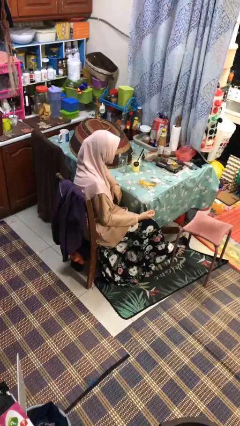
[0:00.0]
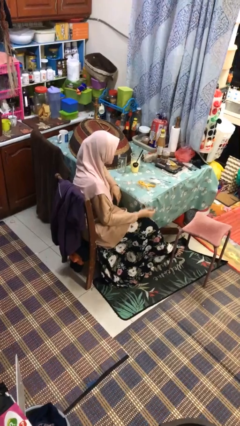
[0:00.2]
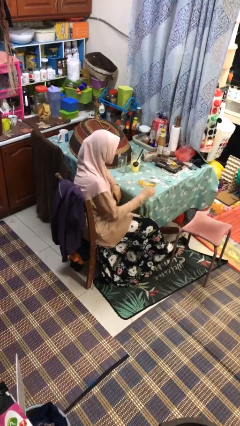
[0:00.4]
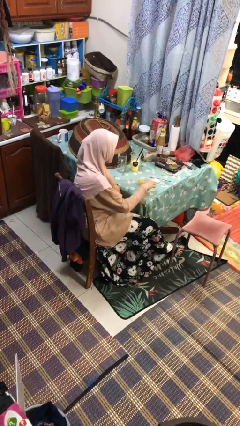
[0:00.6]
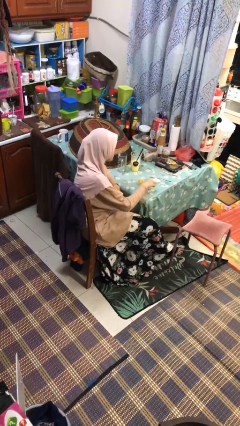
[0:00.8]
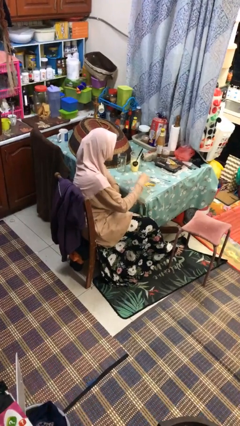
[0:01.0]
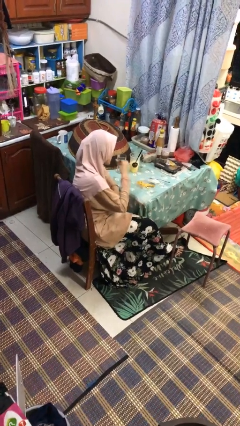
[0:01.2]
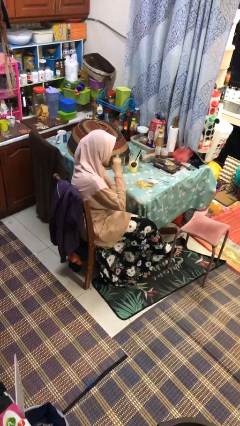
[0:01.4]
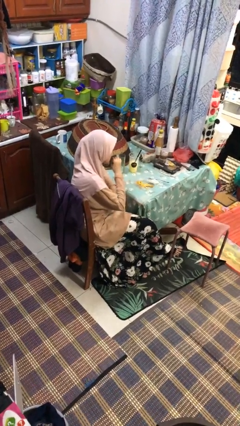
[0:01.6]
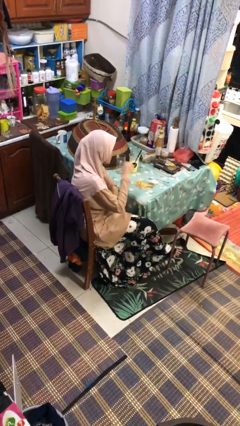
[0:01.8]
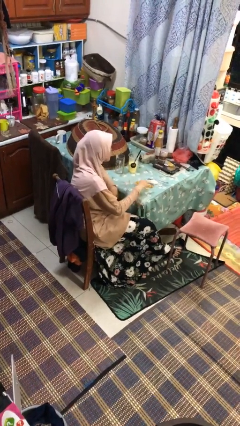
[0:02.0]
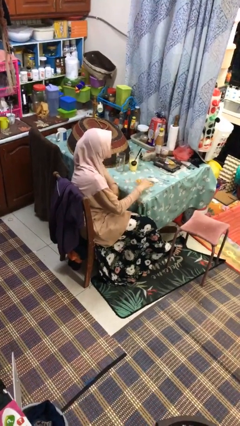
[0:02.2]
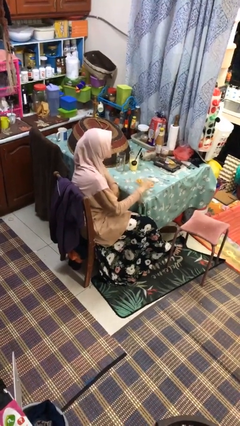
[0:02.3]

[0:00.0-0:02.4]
person eats with hands

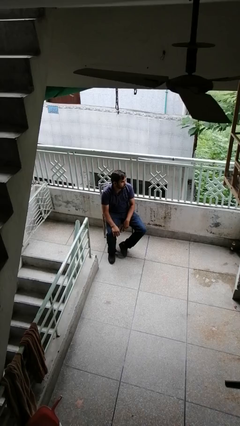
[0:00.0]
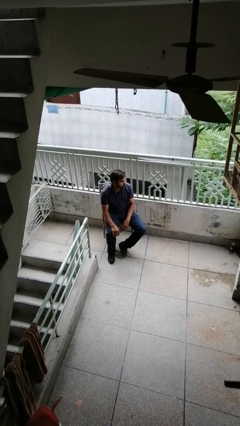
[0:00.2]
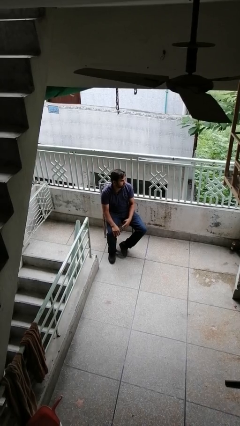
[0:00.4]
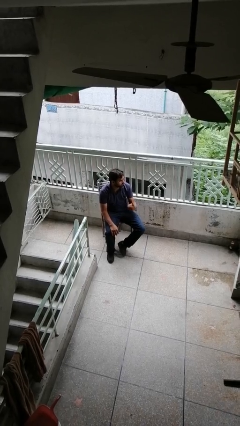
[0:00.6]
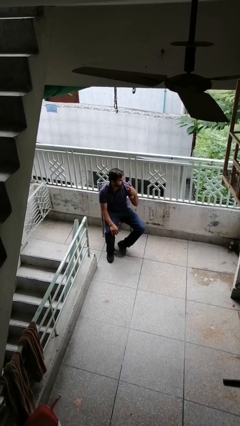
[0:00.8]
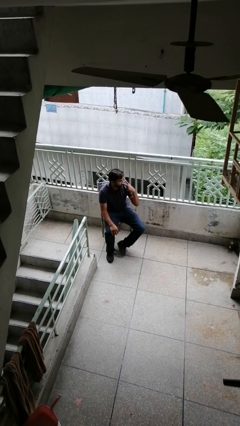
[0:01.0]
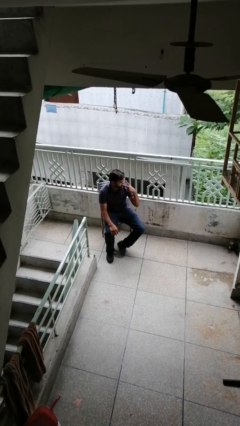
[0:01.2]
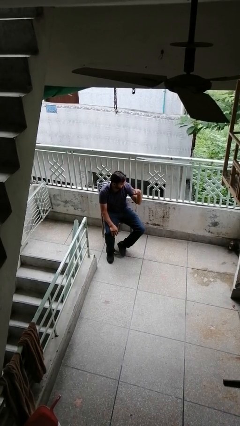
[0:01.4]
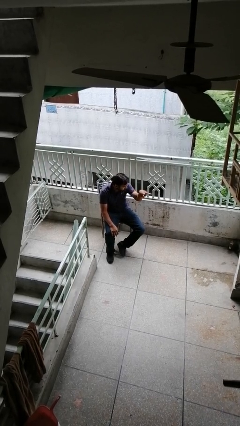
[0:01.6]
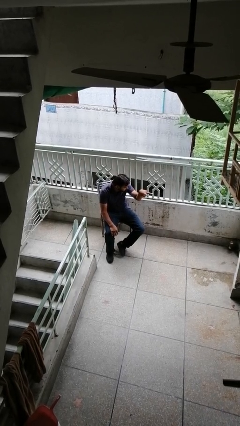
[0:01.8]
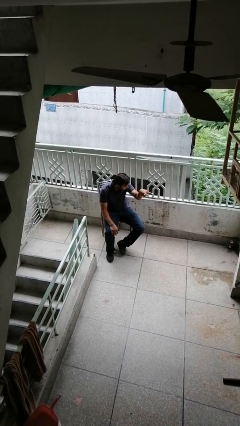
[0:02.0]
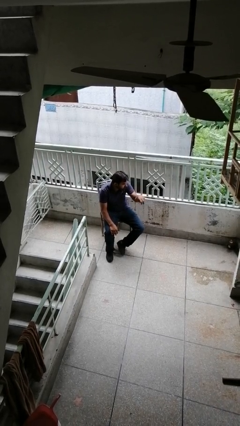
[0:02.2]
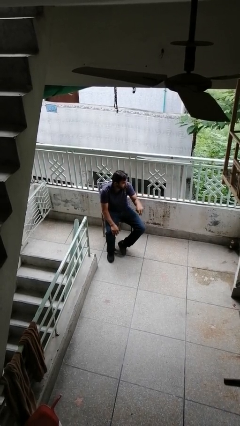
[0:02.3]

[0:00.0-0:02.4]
person gestures watch closely

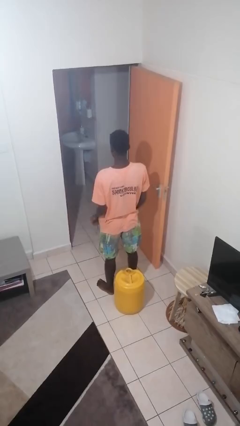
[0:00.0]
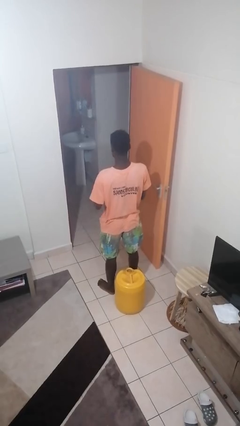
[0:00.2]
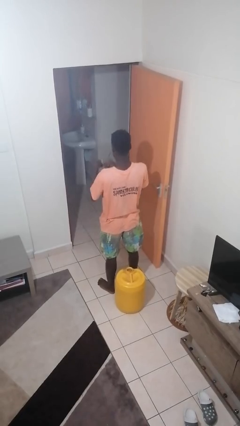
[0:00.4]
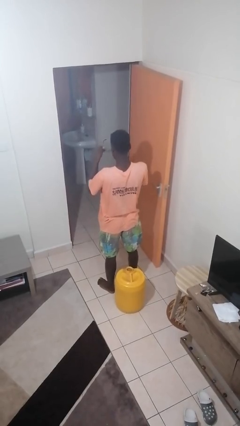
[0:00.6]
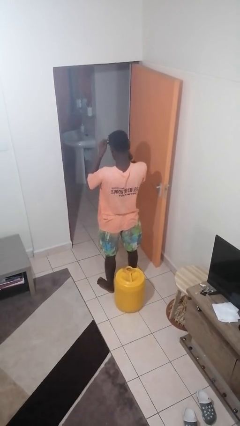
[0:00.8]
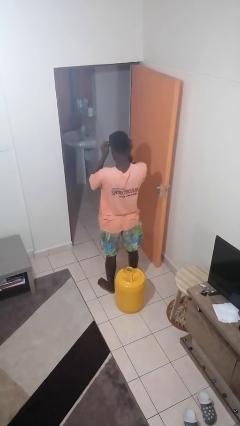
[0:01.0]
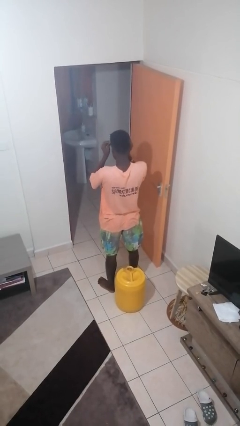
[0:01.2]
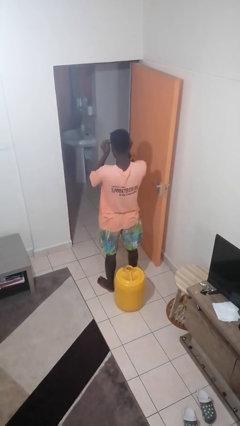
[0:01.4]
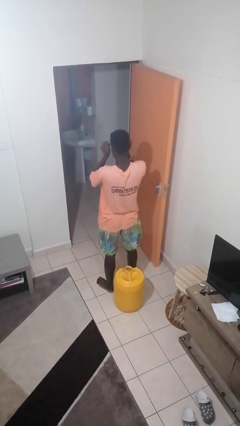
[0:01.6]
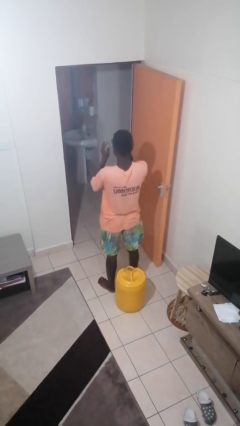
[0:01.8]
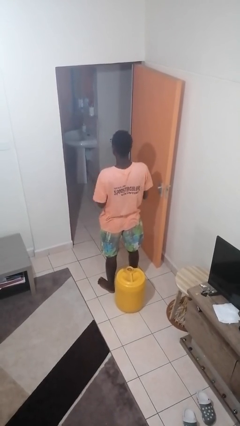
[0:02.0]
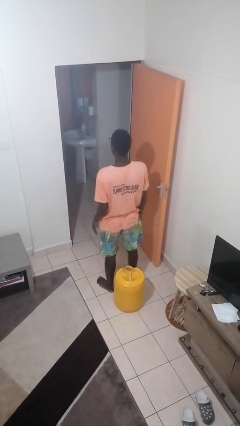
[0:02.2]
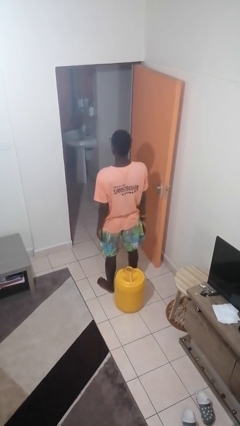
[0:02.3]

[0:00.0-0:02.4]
person puts on glasses

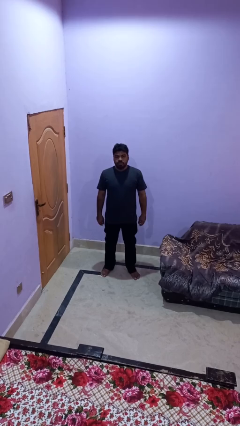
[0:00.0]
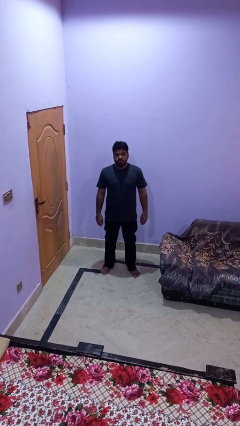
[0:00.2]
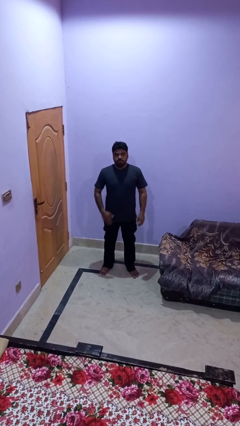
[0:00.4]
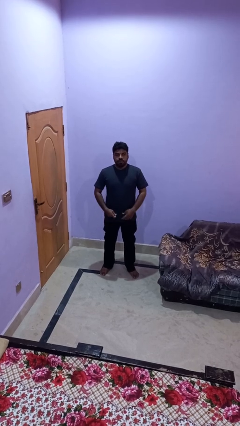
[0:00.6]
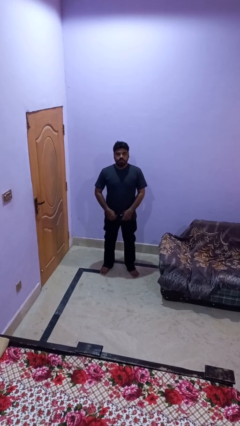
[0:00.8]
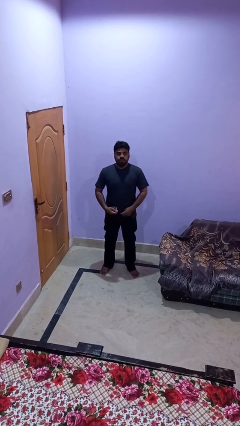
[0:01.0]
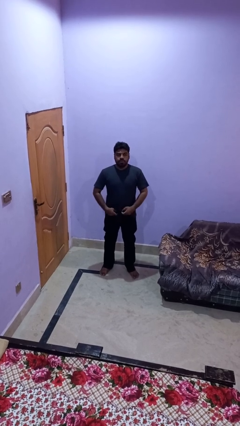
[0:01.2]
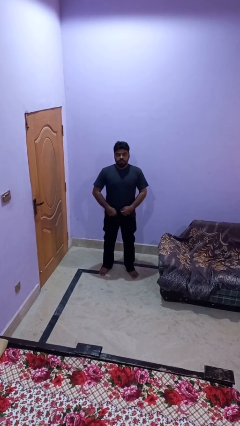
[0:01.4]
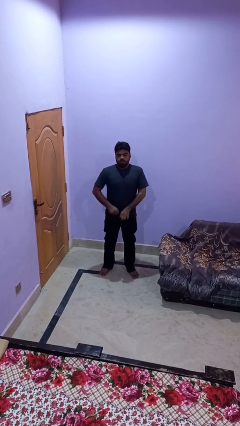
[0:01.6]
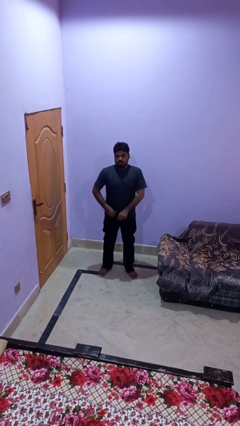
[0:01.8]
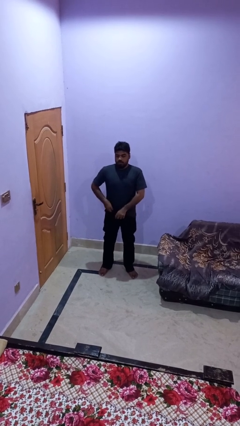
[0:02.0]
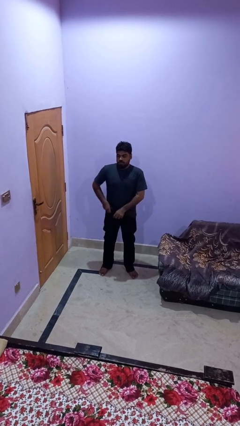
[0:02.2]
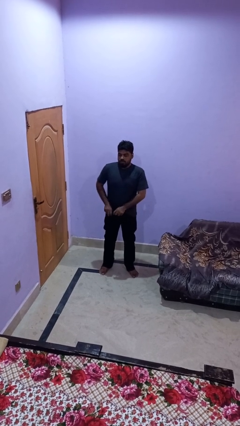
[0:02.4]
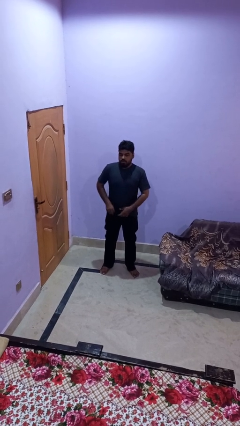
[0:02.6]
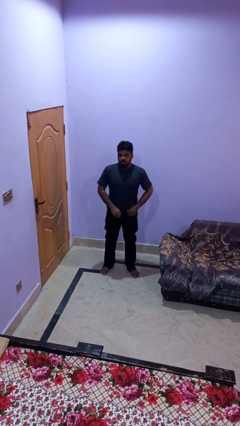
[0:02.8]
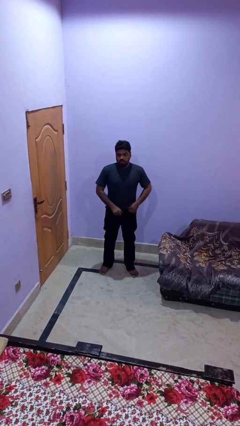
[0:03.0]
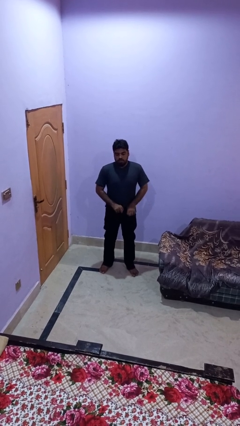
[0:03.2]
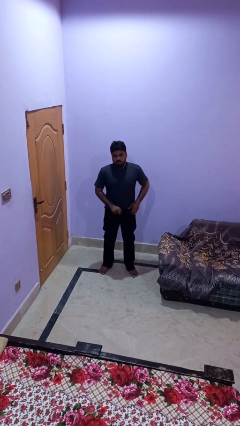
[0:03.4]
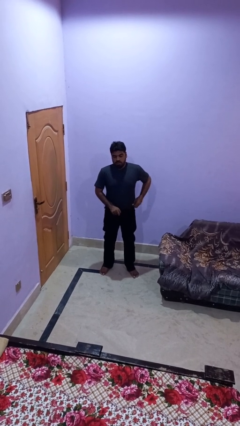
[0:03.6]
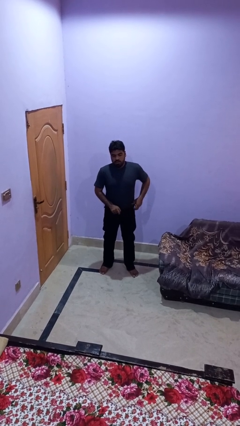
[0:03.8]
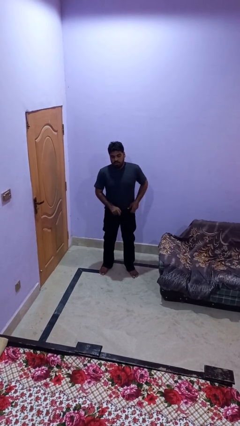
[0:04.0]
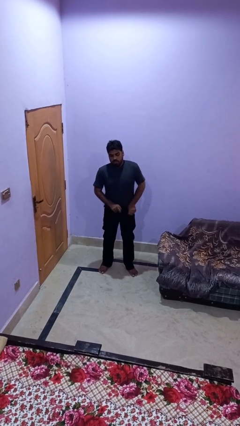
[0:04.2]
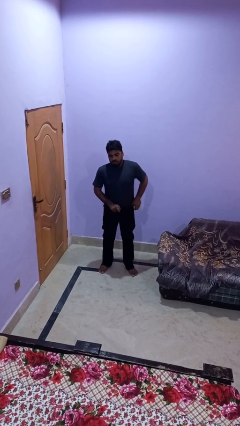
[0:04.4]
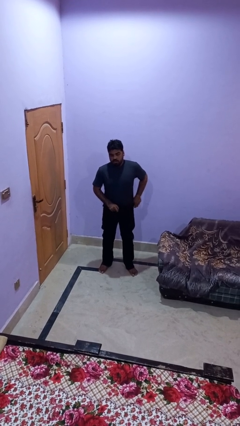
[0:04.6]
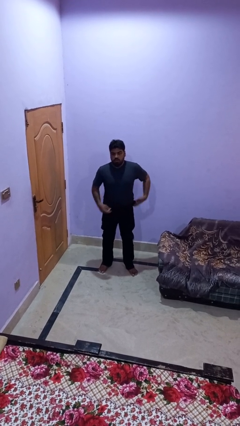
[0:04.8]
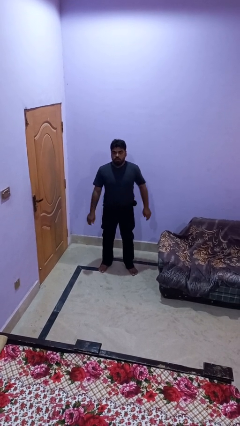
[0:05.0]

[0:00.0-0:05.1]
person tucks in shirt

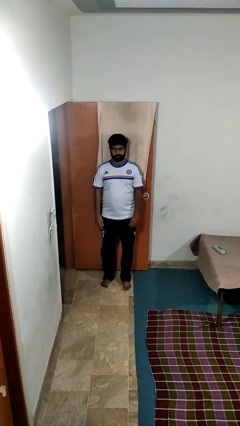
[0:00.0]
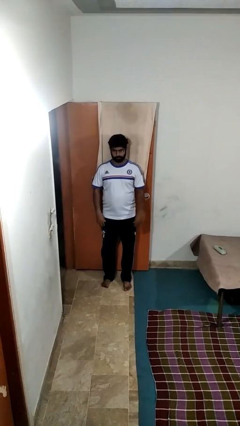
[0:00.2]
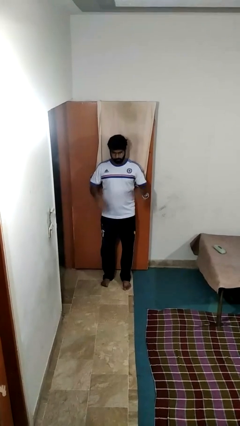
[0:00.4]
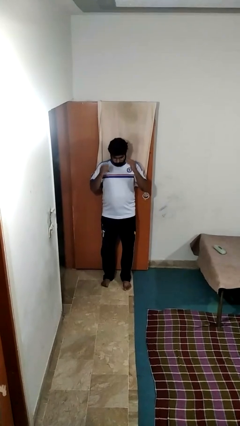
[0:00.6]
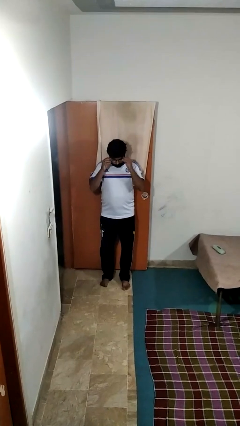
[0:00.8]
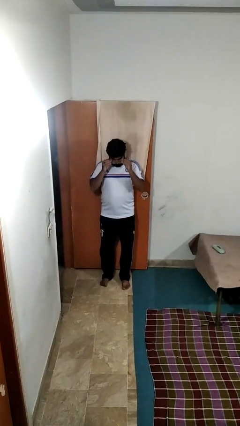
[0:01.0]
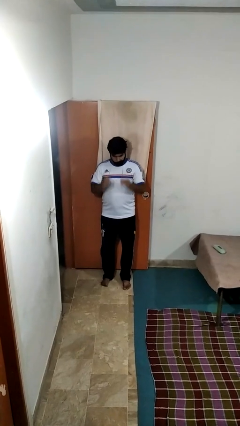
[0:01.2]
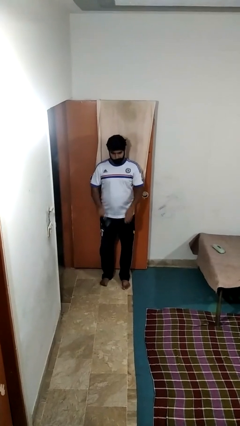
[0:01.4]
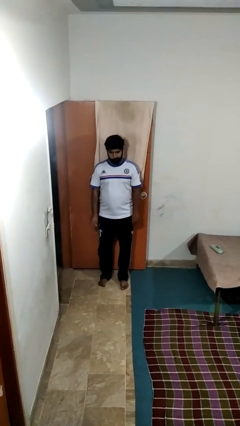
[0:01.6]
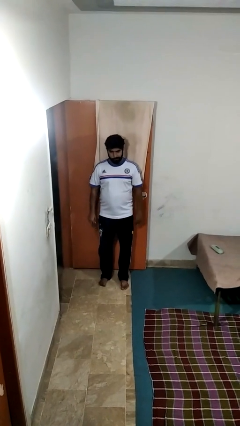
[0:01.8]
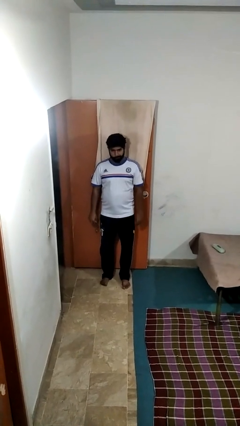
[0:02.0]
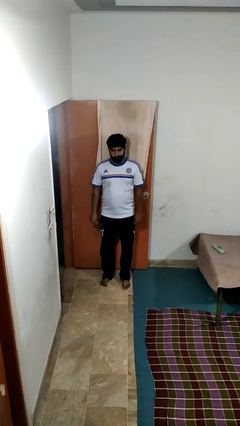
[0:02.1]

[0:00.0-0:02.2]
person takes off glasses

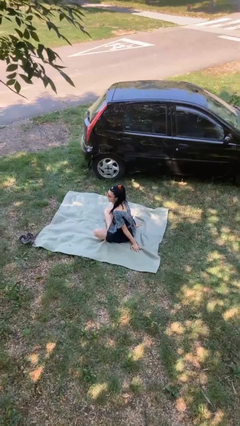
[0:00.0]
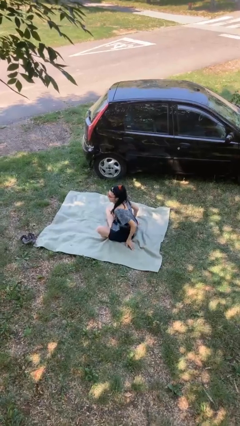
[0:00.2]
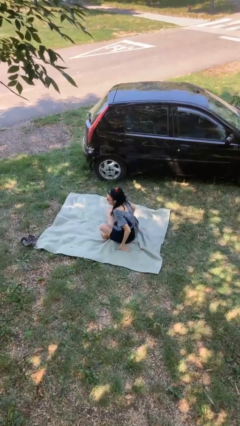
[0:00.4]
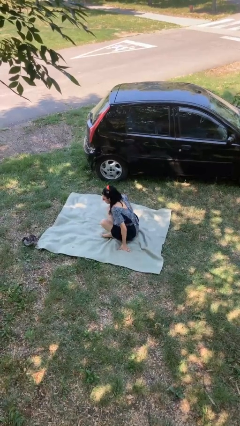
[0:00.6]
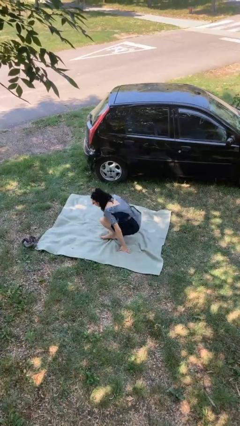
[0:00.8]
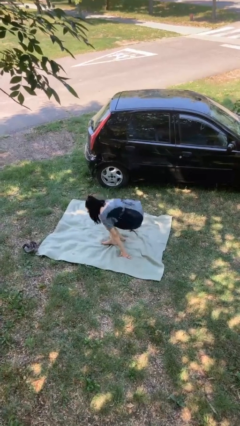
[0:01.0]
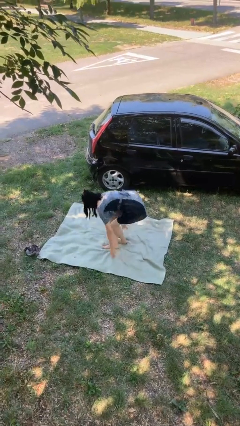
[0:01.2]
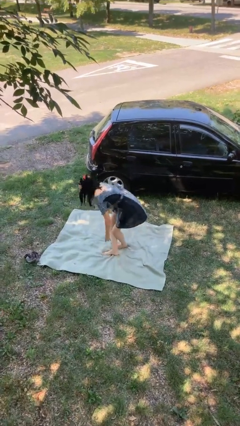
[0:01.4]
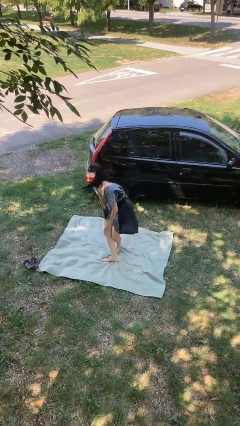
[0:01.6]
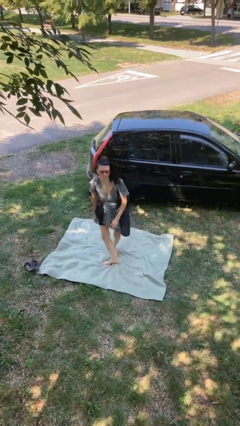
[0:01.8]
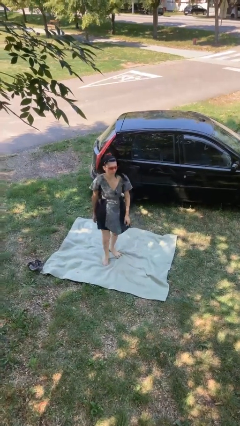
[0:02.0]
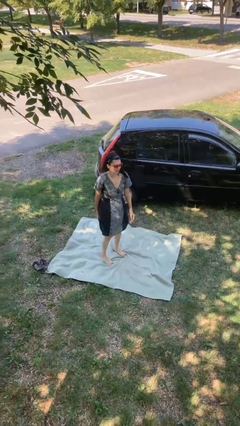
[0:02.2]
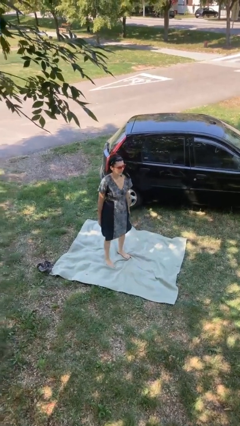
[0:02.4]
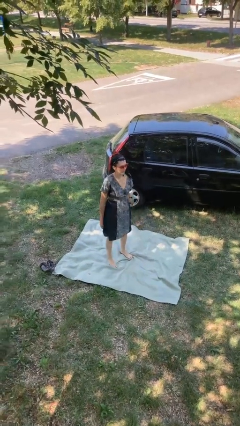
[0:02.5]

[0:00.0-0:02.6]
person stands up from floor

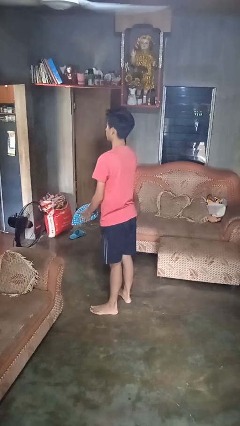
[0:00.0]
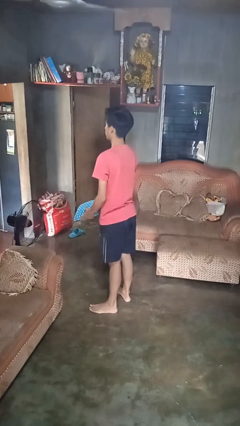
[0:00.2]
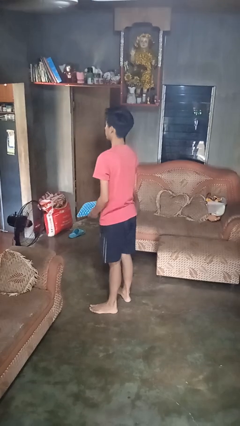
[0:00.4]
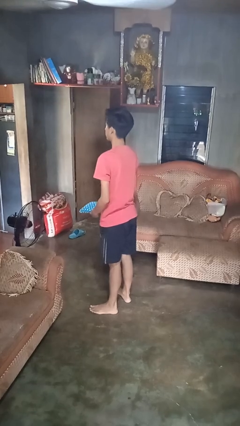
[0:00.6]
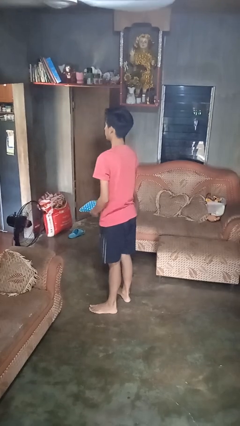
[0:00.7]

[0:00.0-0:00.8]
person catches dropped object
